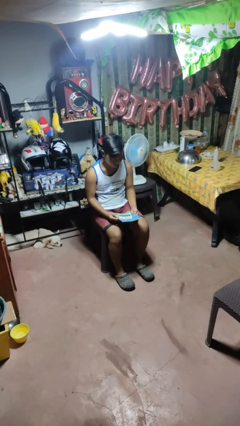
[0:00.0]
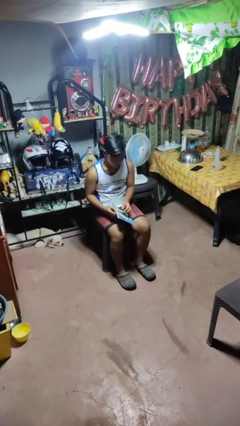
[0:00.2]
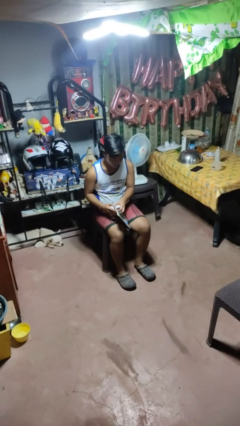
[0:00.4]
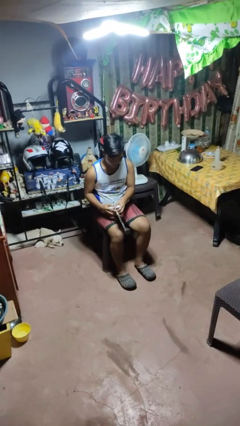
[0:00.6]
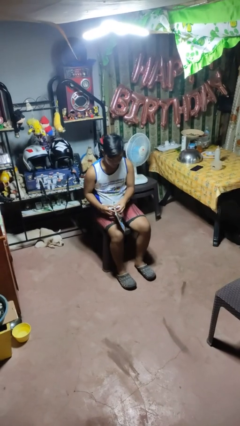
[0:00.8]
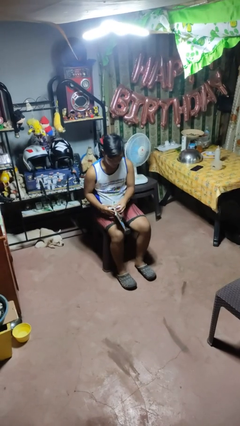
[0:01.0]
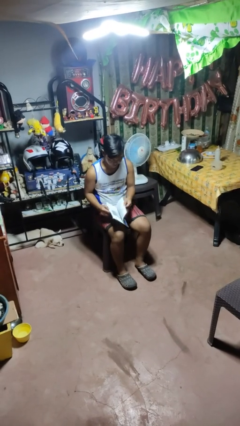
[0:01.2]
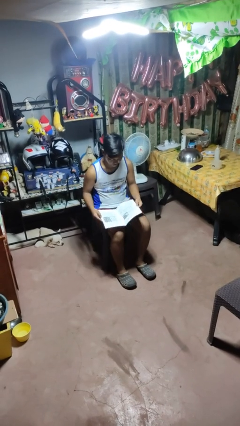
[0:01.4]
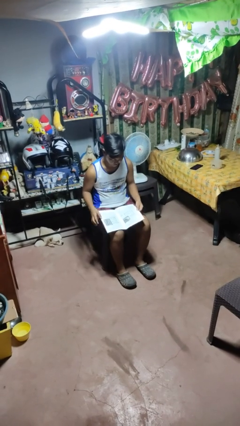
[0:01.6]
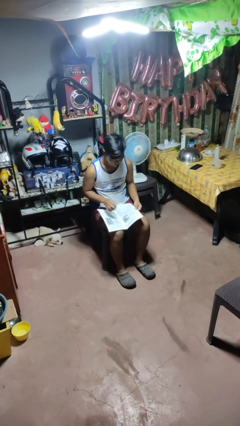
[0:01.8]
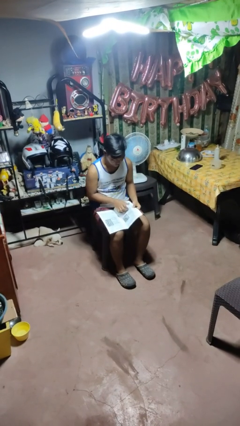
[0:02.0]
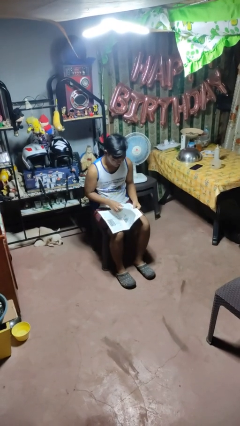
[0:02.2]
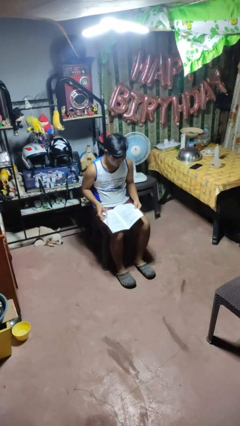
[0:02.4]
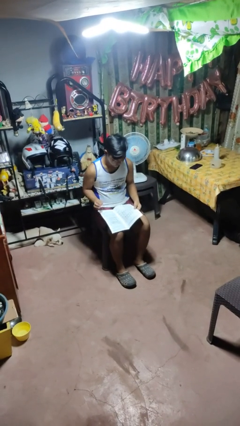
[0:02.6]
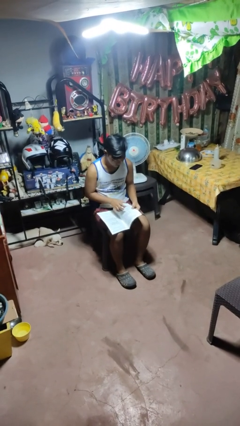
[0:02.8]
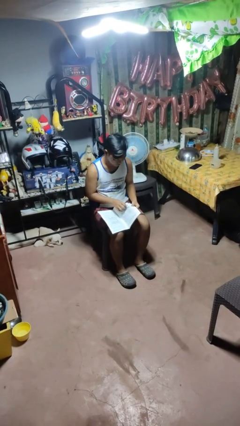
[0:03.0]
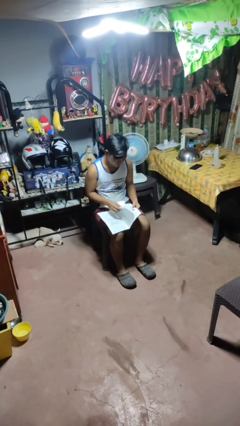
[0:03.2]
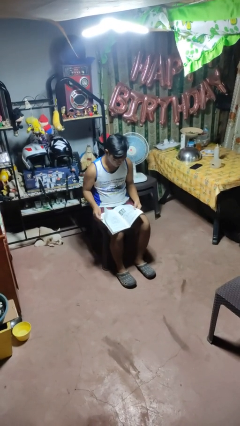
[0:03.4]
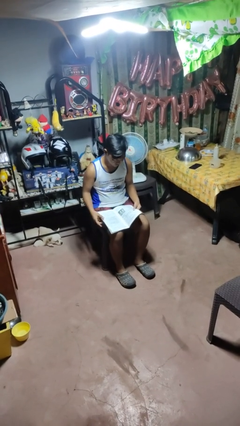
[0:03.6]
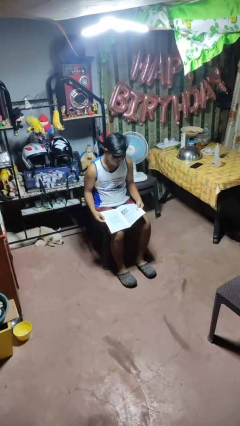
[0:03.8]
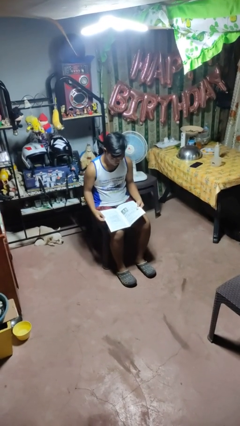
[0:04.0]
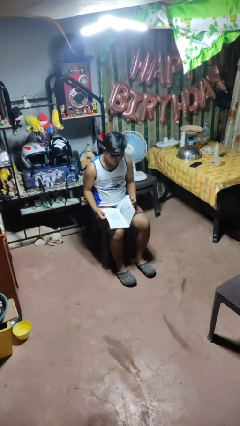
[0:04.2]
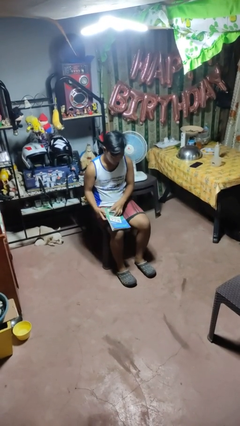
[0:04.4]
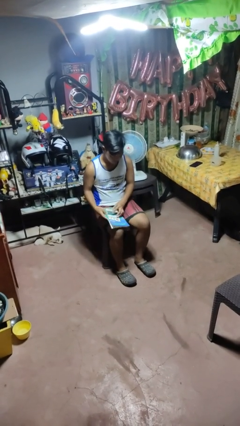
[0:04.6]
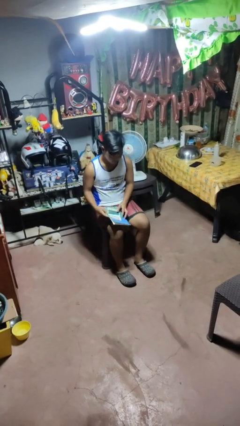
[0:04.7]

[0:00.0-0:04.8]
person reads magazine

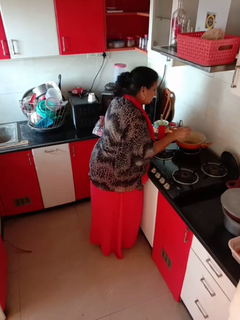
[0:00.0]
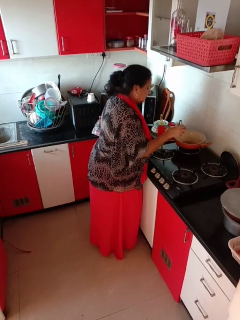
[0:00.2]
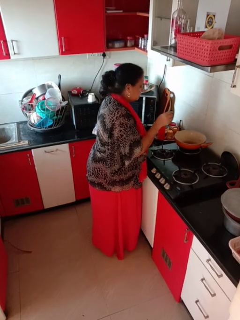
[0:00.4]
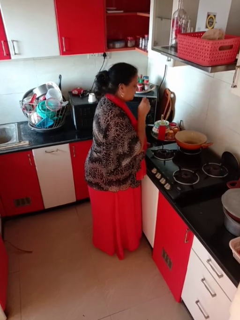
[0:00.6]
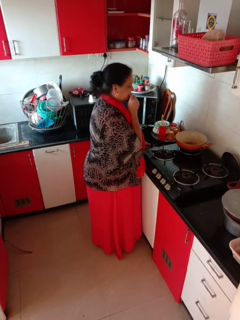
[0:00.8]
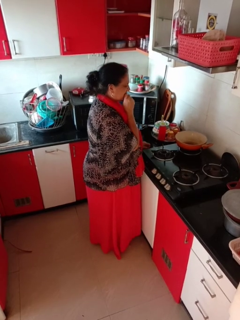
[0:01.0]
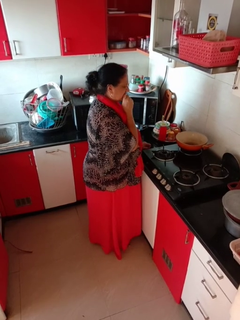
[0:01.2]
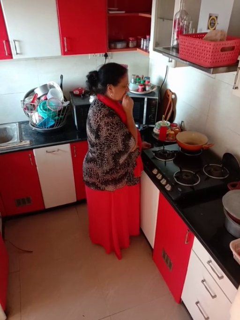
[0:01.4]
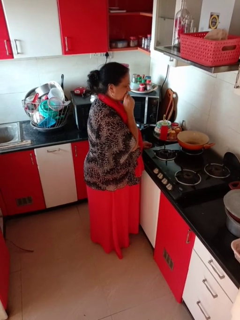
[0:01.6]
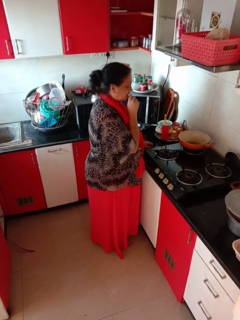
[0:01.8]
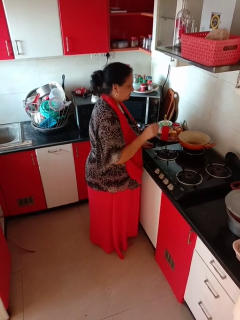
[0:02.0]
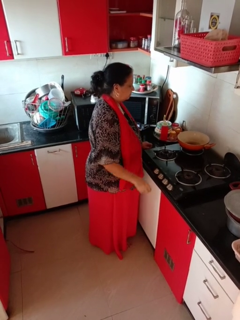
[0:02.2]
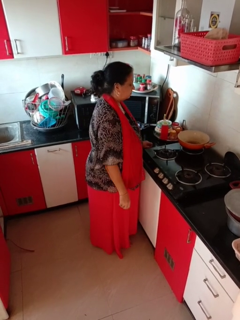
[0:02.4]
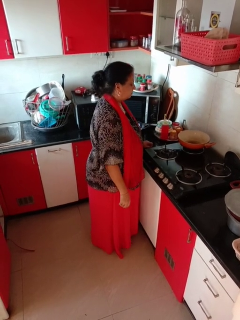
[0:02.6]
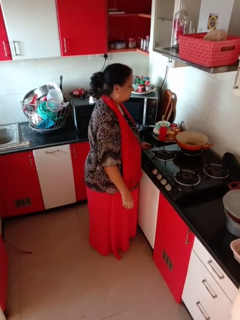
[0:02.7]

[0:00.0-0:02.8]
person burns hand

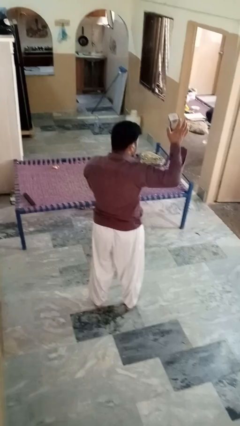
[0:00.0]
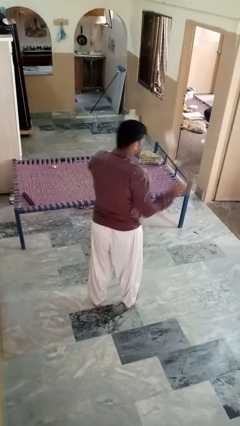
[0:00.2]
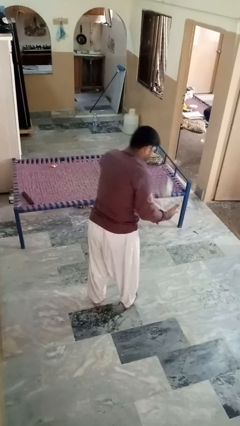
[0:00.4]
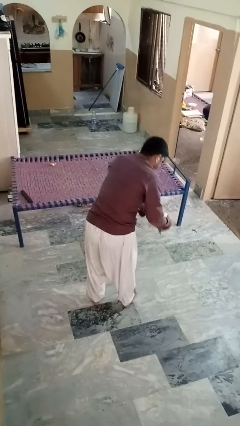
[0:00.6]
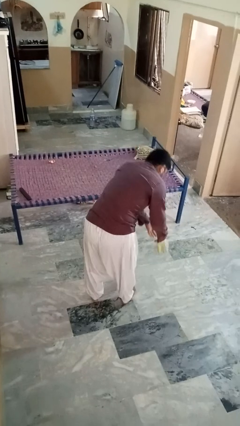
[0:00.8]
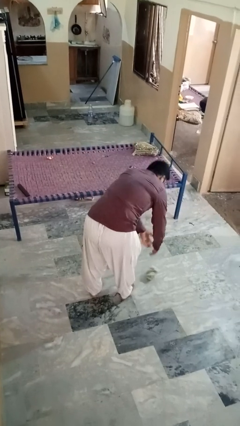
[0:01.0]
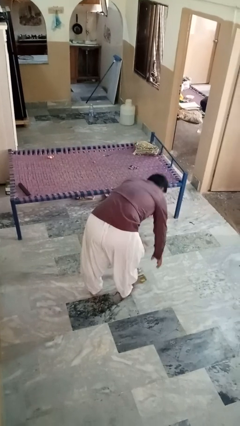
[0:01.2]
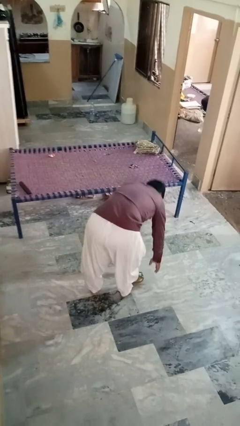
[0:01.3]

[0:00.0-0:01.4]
person catches dropped object

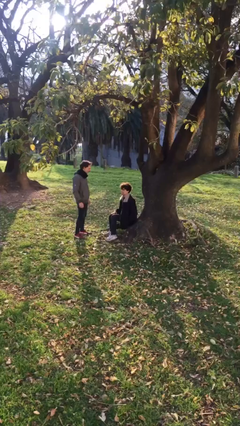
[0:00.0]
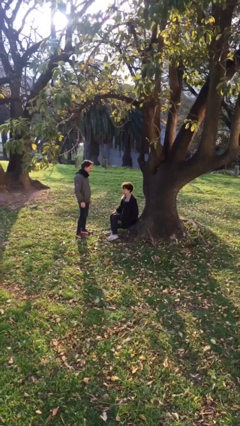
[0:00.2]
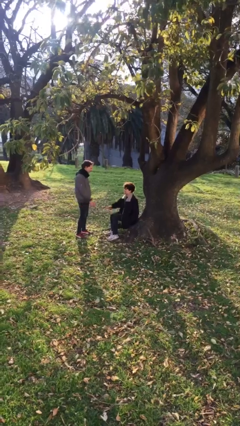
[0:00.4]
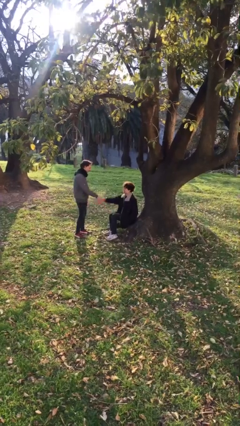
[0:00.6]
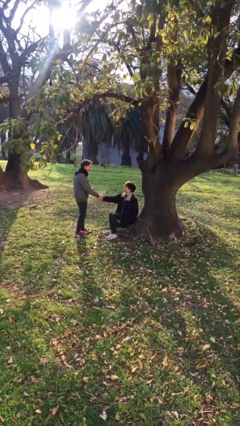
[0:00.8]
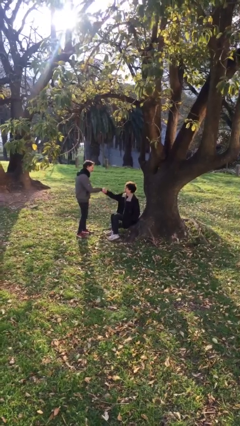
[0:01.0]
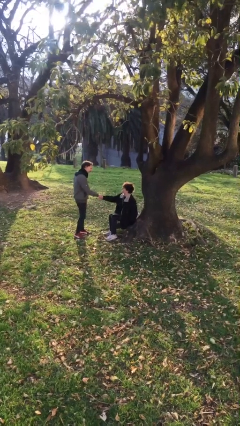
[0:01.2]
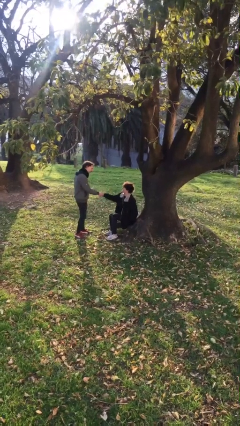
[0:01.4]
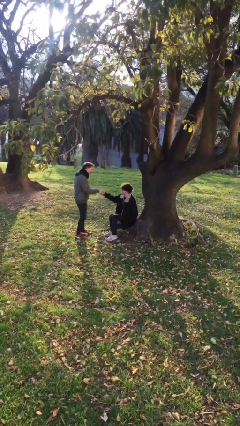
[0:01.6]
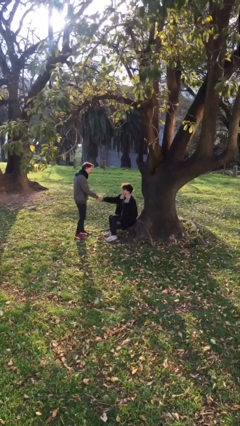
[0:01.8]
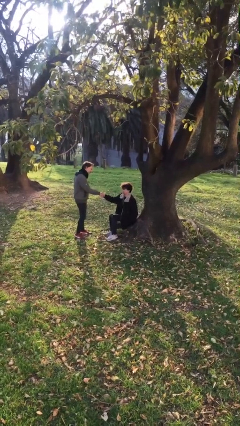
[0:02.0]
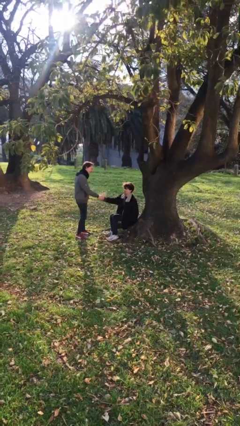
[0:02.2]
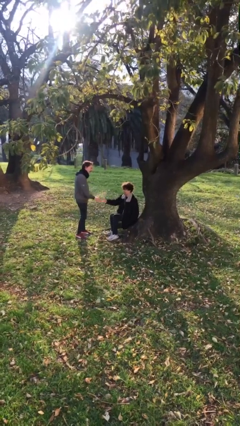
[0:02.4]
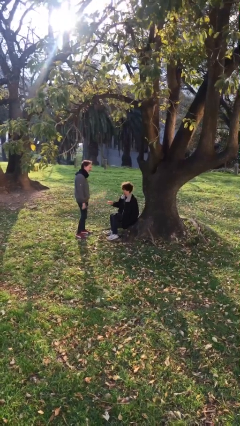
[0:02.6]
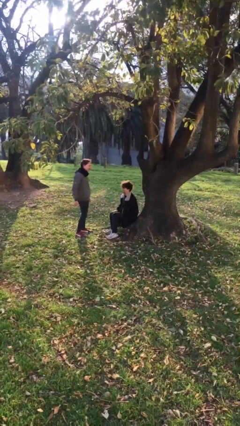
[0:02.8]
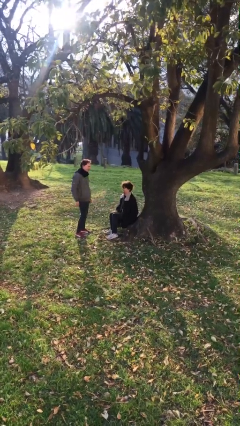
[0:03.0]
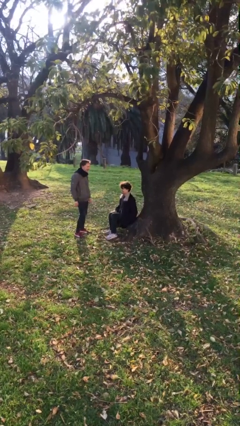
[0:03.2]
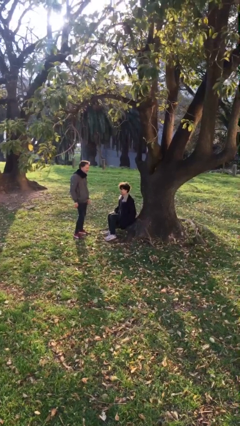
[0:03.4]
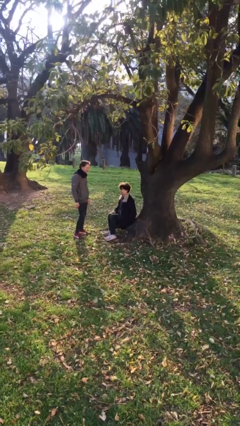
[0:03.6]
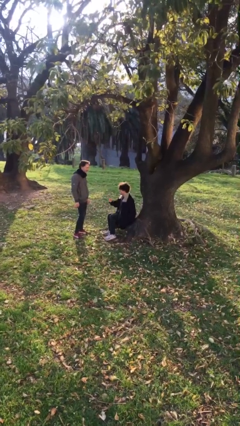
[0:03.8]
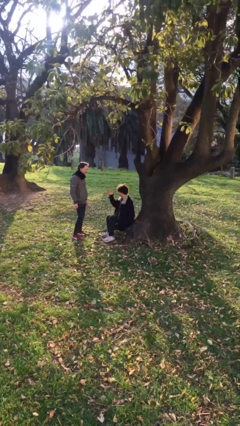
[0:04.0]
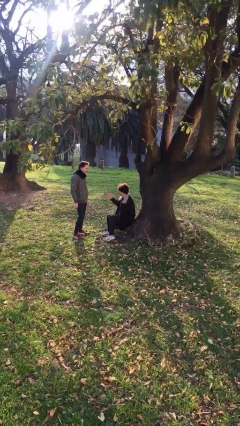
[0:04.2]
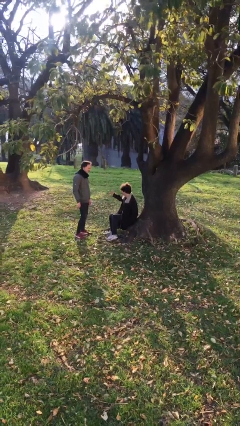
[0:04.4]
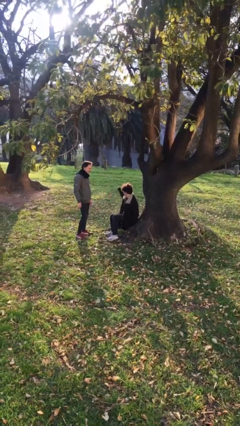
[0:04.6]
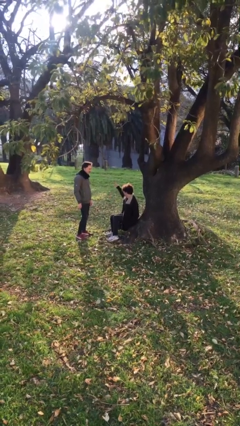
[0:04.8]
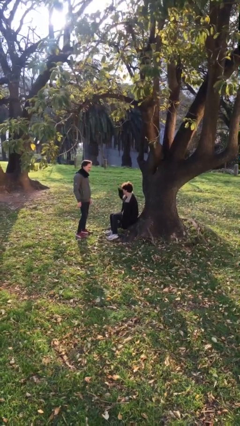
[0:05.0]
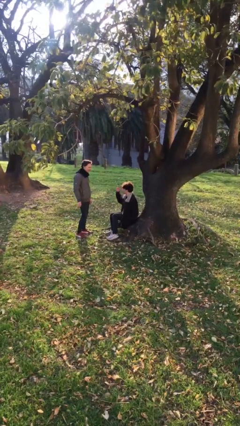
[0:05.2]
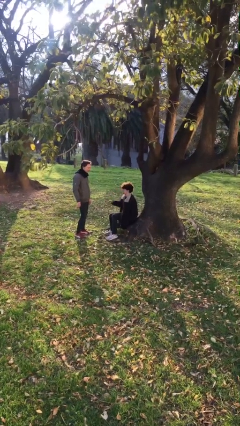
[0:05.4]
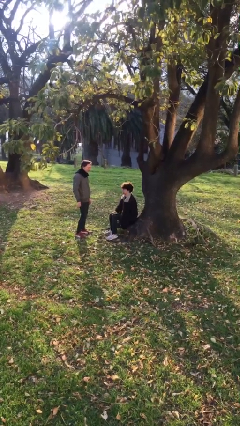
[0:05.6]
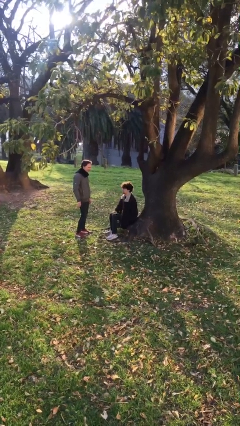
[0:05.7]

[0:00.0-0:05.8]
person shakes hand

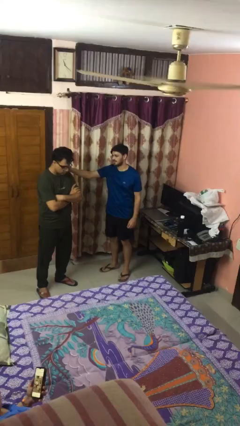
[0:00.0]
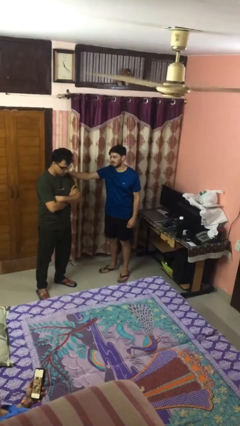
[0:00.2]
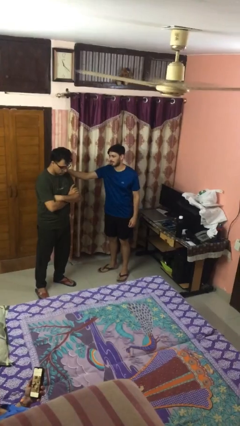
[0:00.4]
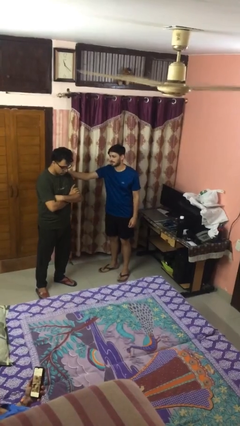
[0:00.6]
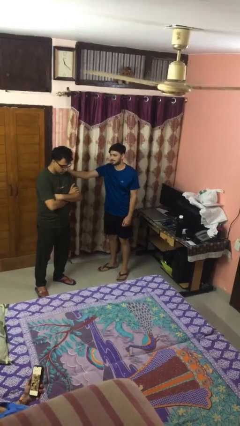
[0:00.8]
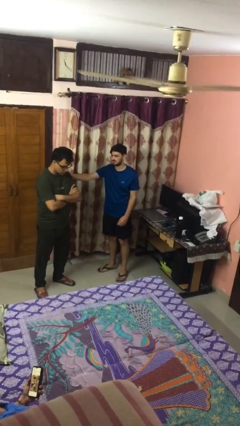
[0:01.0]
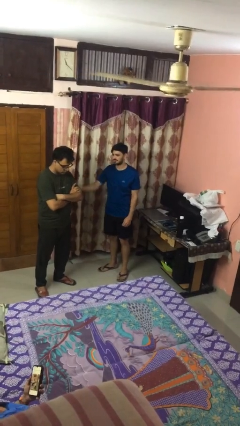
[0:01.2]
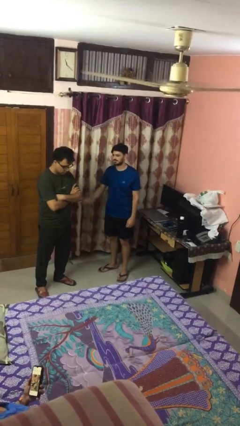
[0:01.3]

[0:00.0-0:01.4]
person pounds shoulders of person

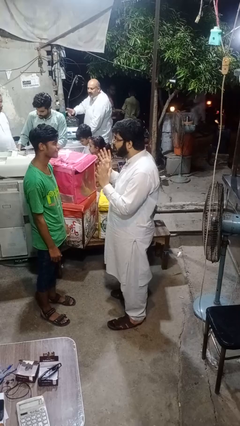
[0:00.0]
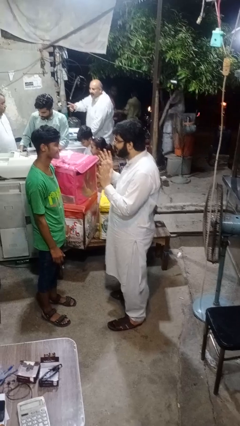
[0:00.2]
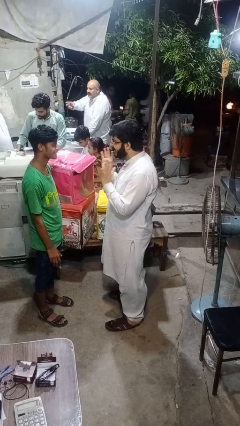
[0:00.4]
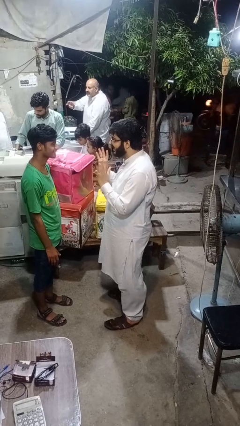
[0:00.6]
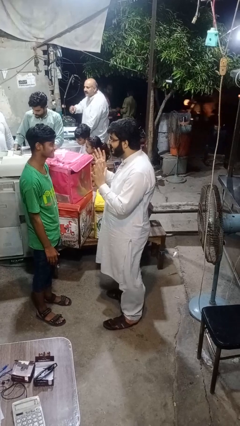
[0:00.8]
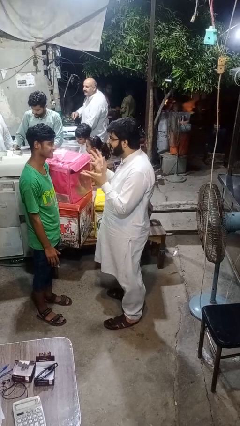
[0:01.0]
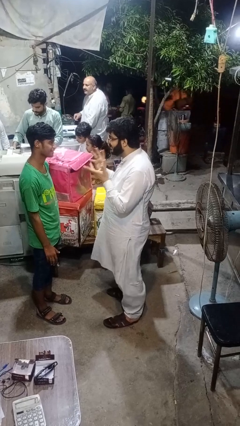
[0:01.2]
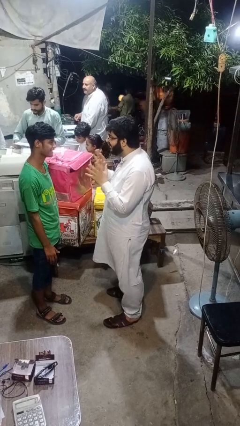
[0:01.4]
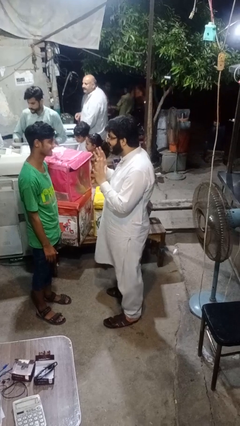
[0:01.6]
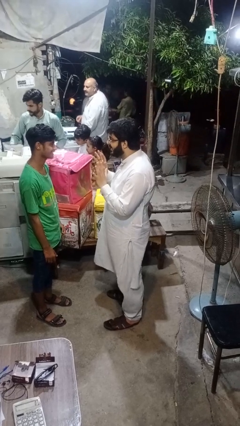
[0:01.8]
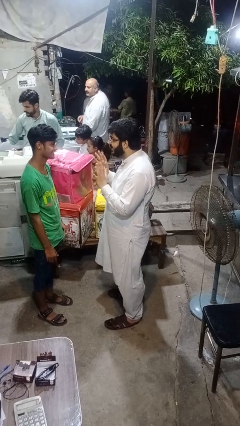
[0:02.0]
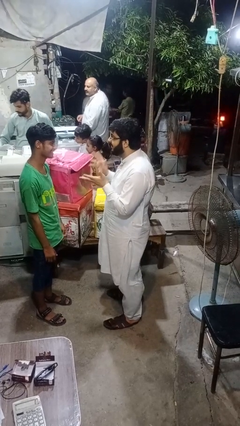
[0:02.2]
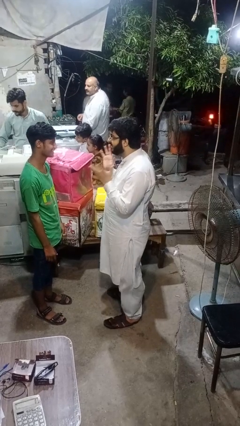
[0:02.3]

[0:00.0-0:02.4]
person talks to person
